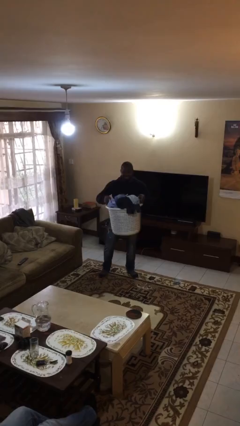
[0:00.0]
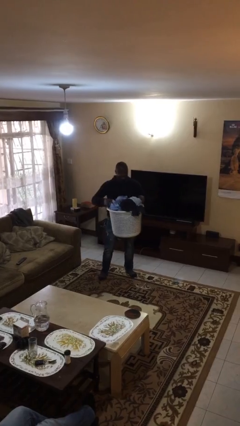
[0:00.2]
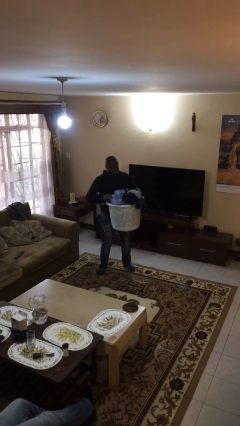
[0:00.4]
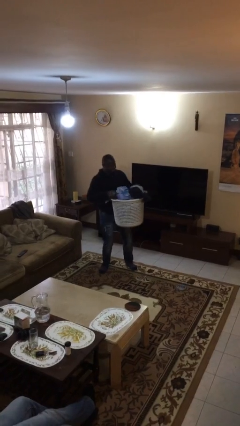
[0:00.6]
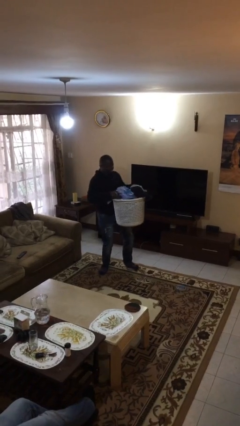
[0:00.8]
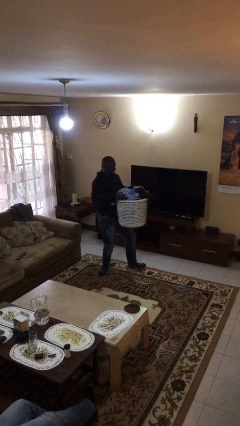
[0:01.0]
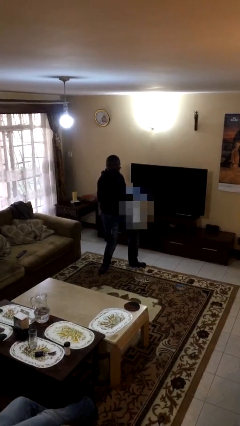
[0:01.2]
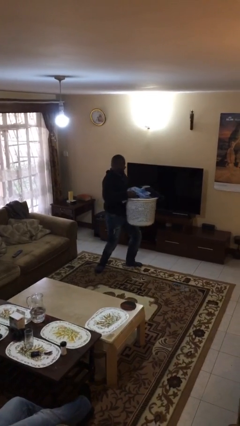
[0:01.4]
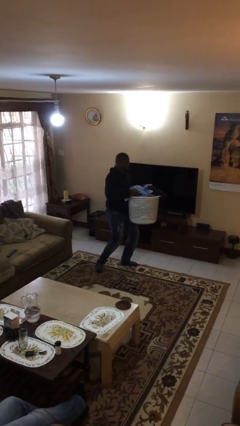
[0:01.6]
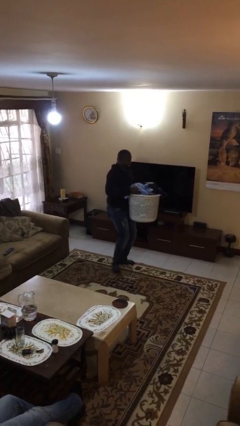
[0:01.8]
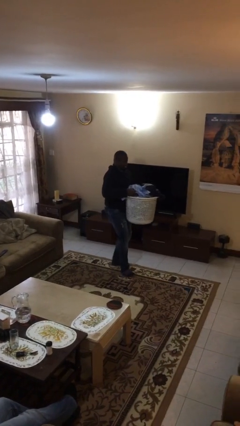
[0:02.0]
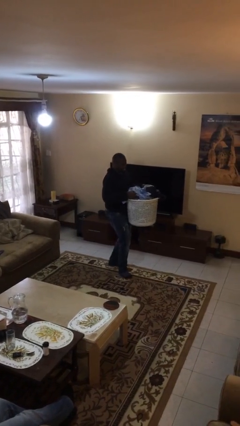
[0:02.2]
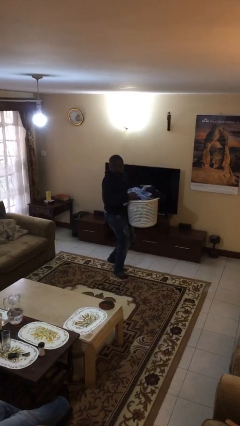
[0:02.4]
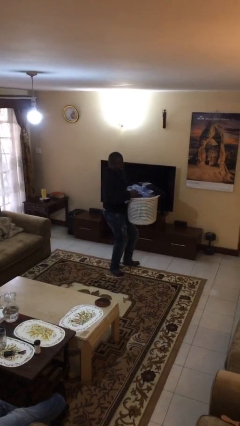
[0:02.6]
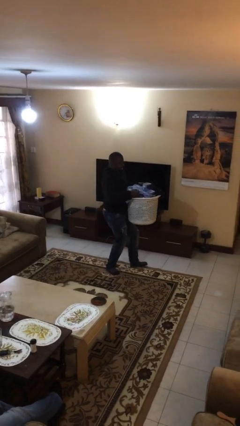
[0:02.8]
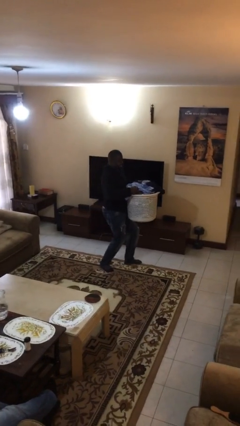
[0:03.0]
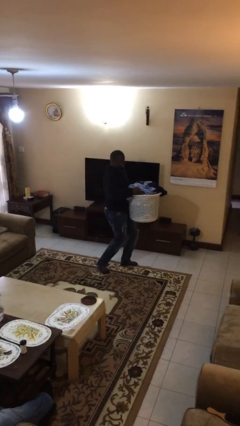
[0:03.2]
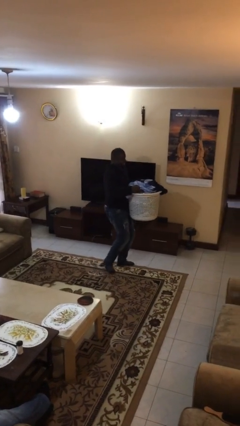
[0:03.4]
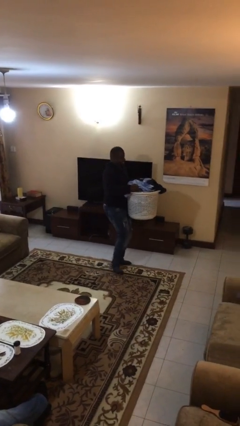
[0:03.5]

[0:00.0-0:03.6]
person carries heavy object

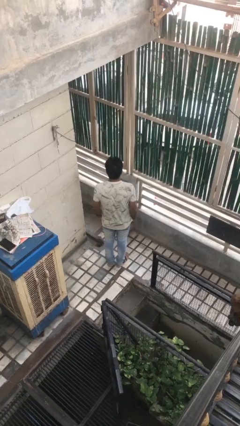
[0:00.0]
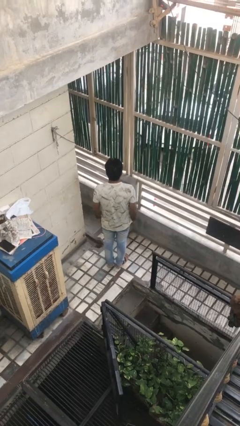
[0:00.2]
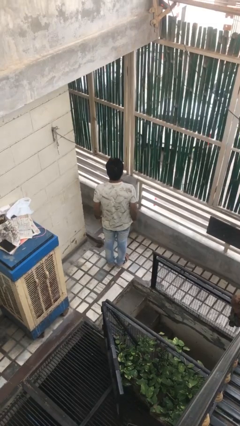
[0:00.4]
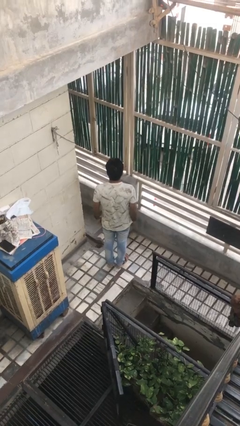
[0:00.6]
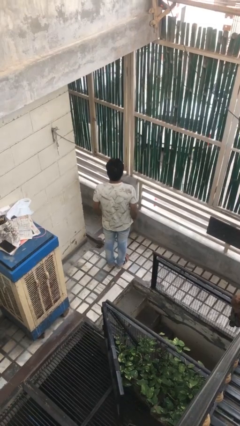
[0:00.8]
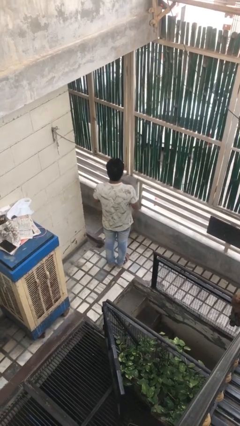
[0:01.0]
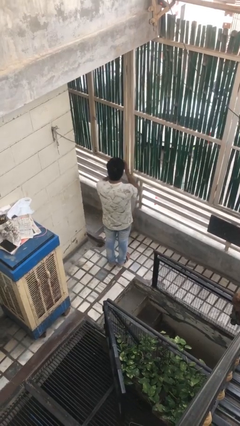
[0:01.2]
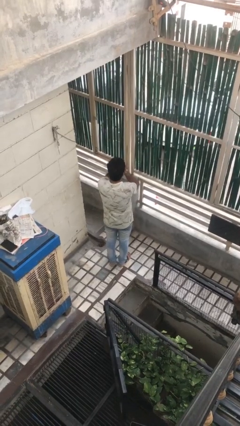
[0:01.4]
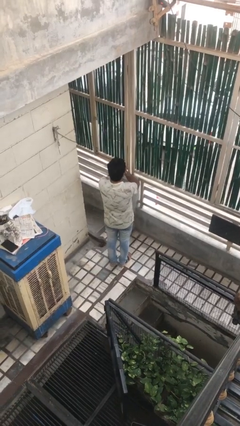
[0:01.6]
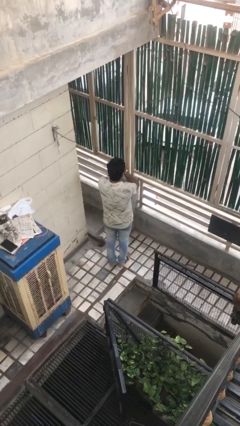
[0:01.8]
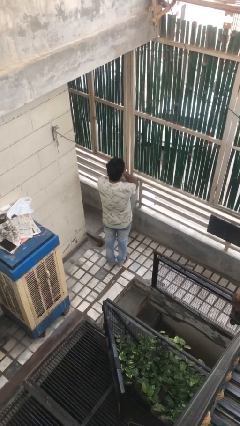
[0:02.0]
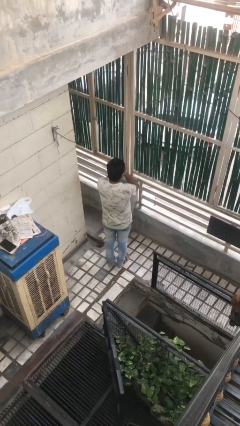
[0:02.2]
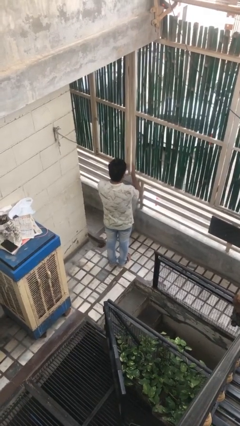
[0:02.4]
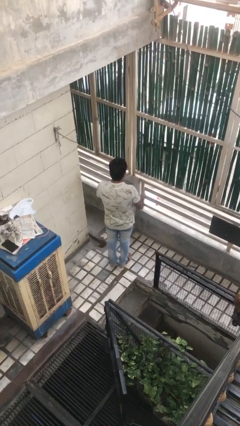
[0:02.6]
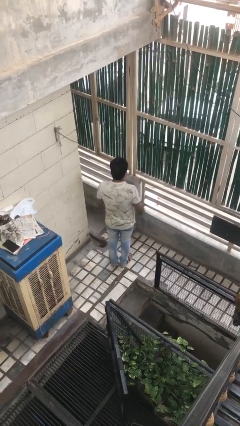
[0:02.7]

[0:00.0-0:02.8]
person covers face with hands

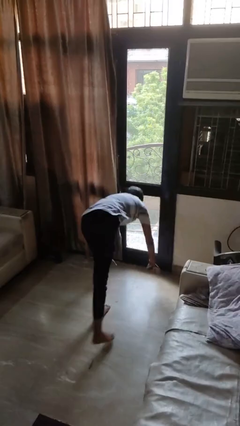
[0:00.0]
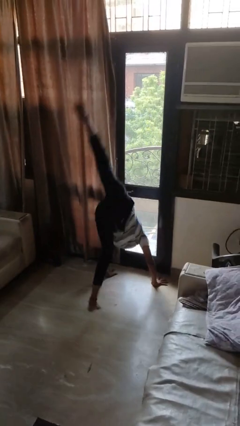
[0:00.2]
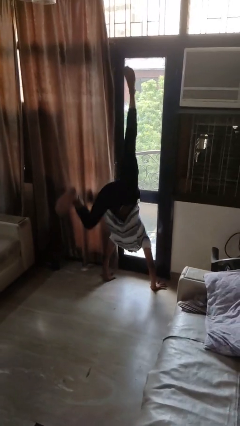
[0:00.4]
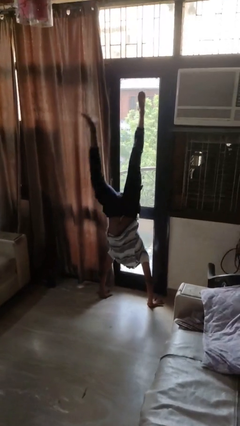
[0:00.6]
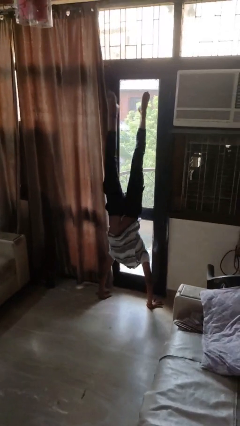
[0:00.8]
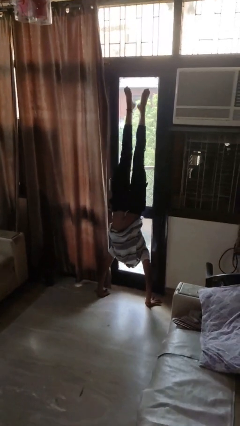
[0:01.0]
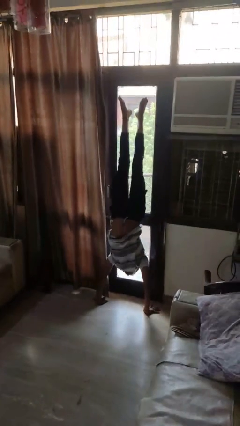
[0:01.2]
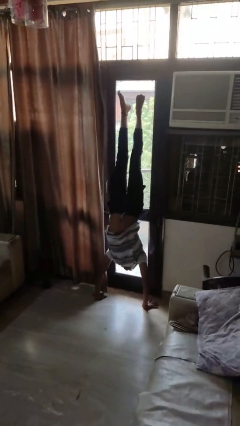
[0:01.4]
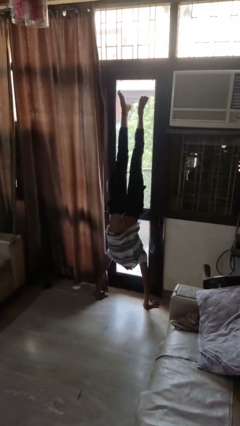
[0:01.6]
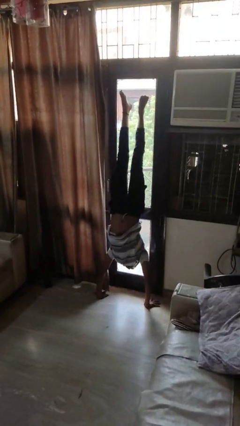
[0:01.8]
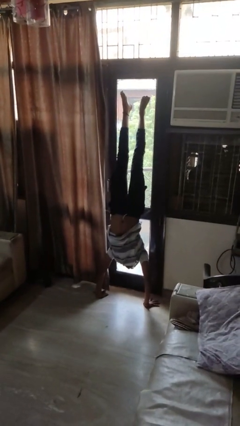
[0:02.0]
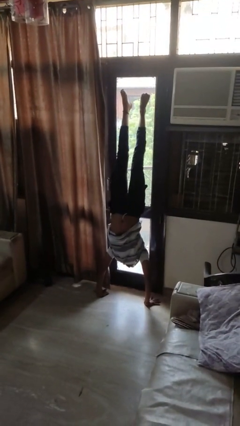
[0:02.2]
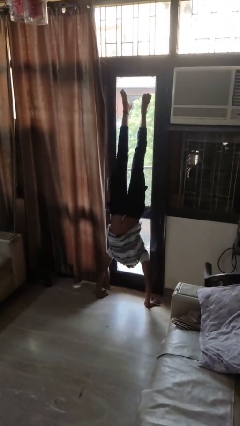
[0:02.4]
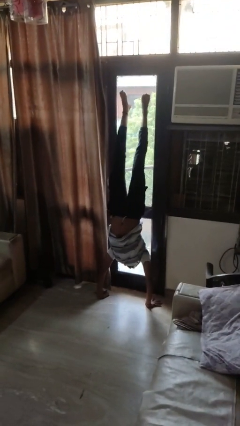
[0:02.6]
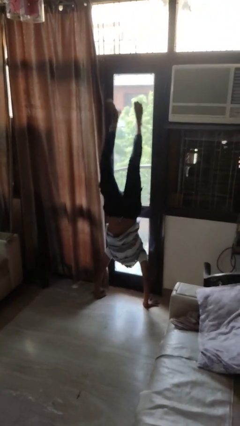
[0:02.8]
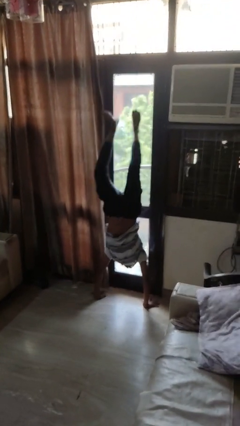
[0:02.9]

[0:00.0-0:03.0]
person handstand

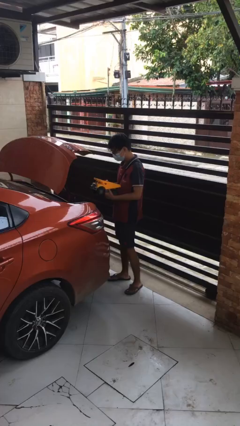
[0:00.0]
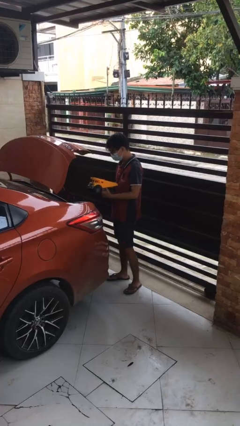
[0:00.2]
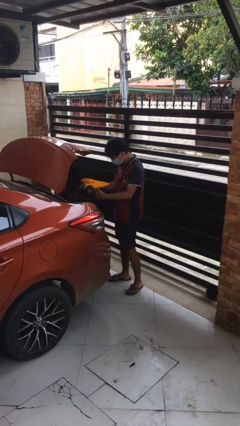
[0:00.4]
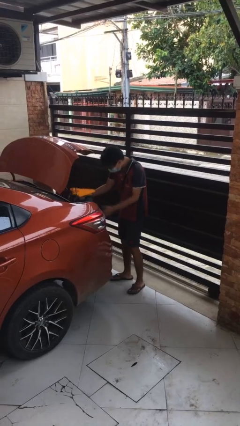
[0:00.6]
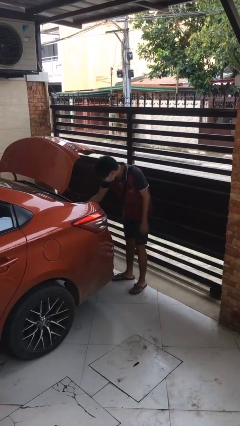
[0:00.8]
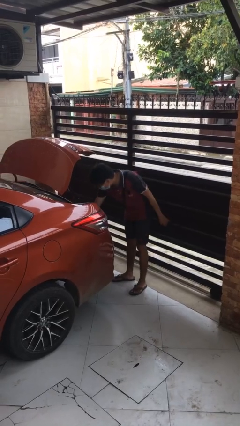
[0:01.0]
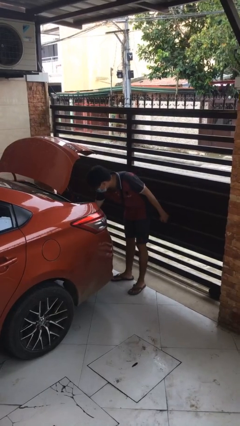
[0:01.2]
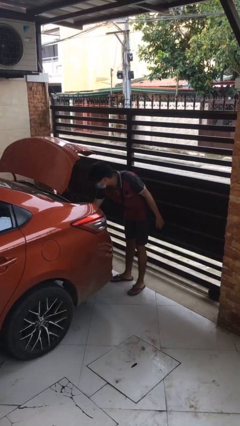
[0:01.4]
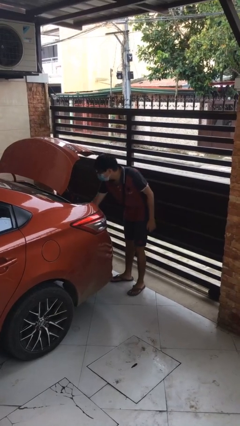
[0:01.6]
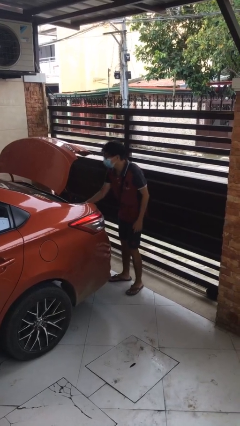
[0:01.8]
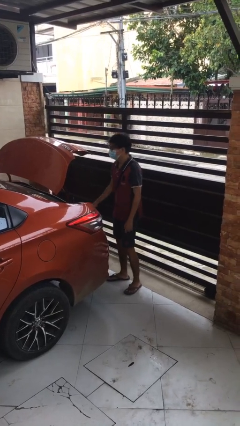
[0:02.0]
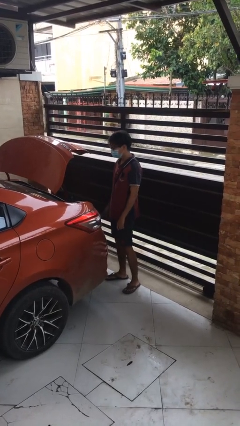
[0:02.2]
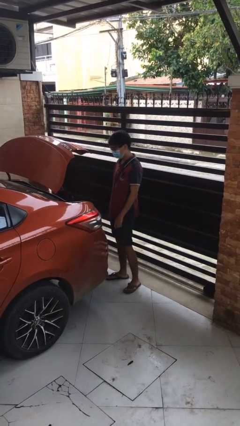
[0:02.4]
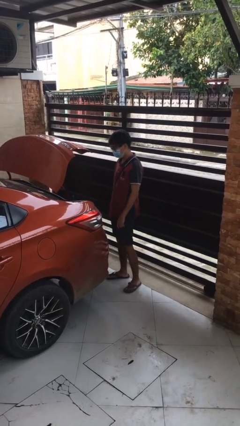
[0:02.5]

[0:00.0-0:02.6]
person loads car

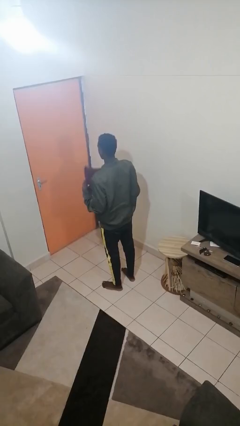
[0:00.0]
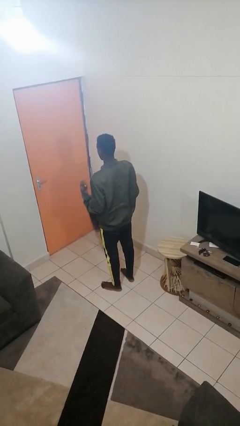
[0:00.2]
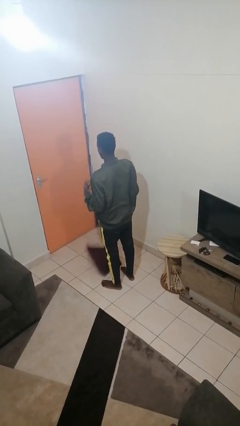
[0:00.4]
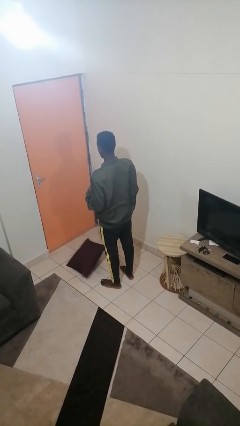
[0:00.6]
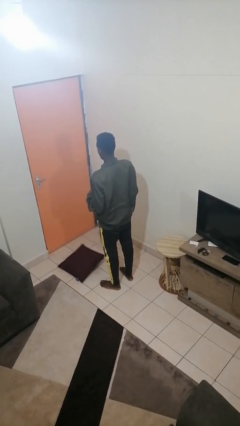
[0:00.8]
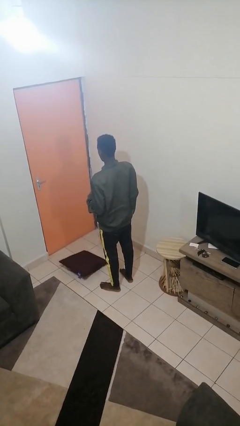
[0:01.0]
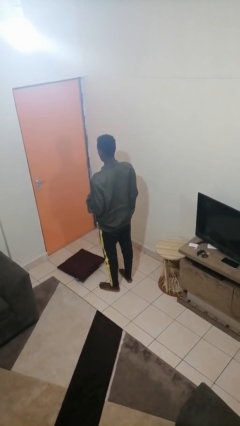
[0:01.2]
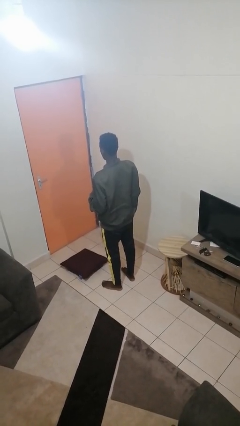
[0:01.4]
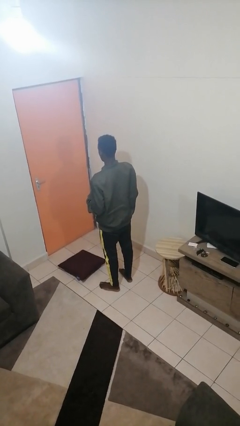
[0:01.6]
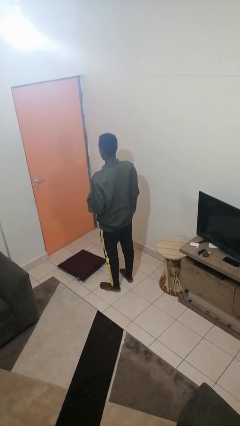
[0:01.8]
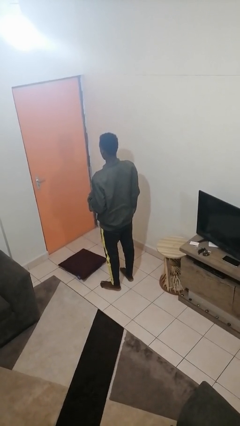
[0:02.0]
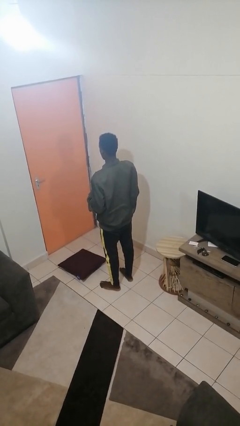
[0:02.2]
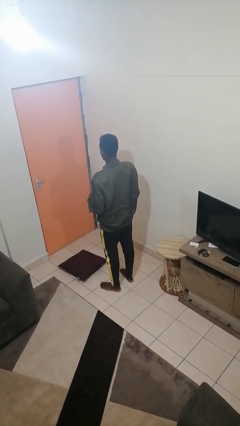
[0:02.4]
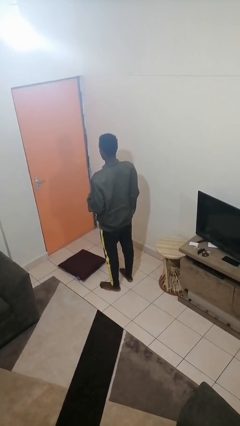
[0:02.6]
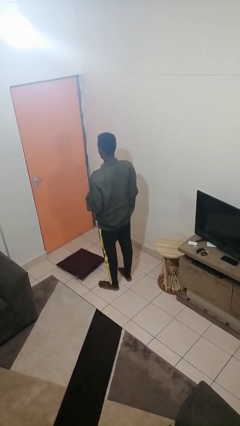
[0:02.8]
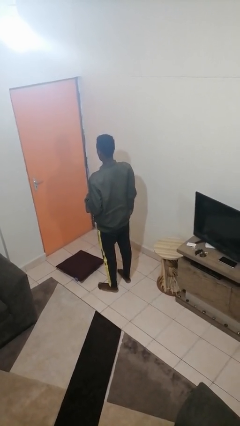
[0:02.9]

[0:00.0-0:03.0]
person drops object

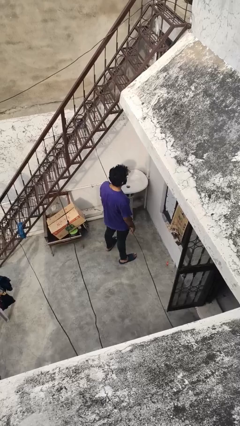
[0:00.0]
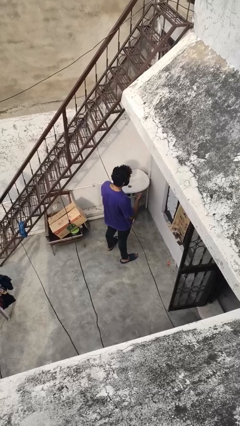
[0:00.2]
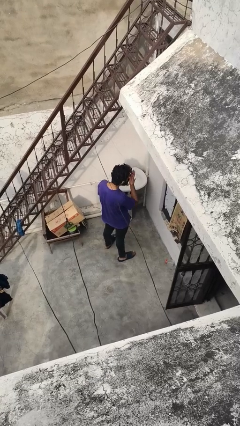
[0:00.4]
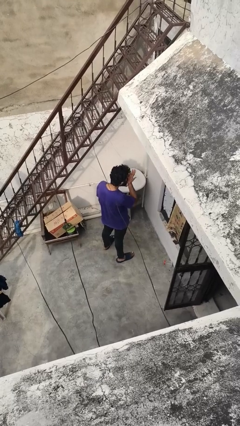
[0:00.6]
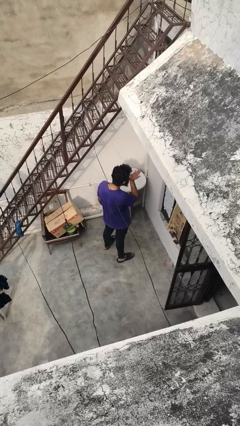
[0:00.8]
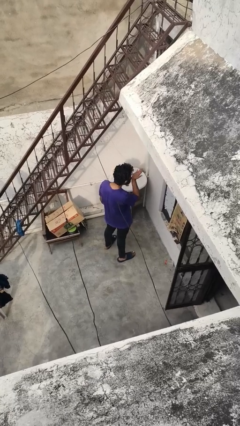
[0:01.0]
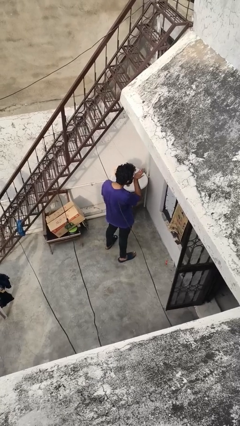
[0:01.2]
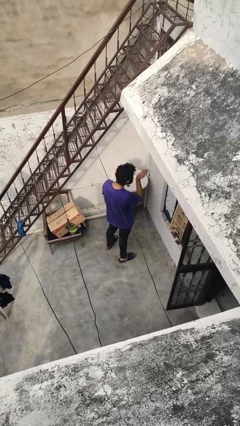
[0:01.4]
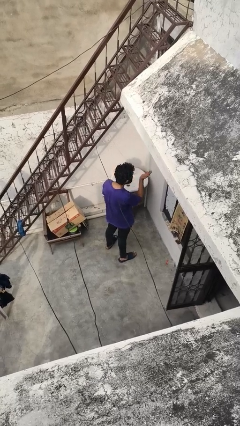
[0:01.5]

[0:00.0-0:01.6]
person gestures blow kiss

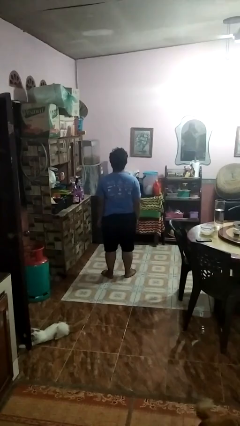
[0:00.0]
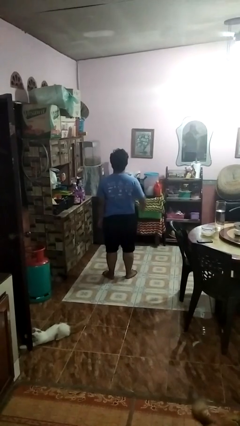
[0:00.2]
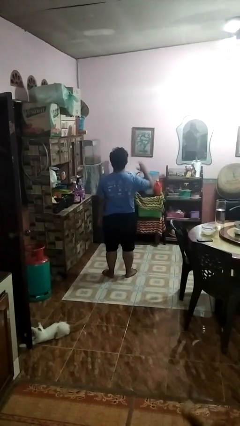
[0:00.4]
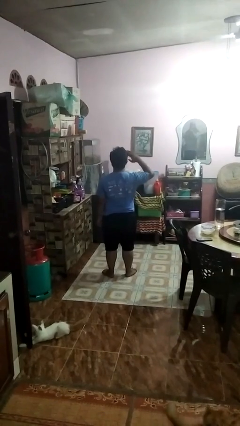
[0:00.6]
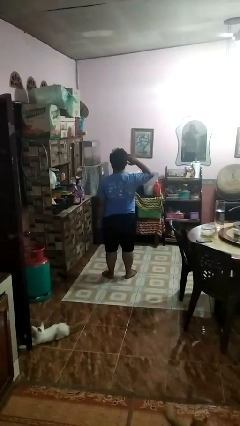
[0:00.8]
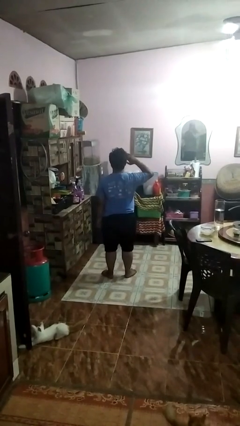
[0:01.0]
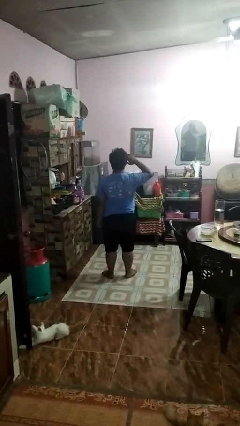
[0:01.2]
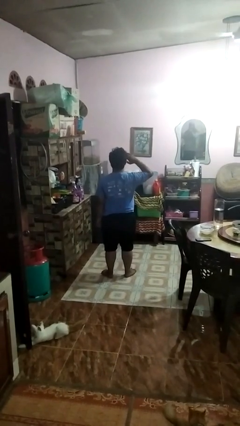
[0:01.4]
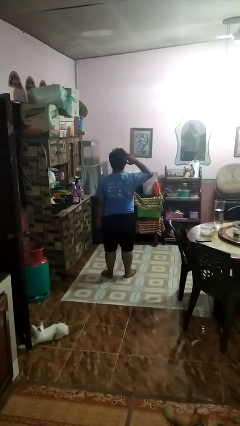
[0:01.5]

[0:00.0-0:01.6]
person salutes
